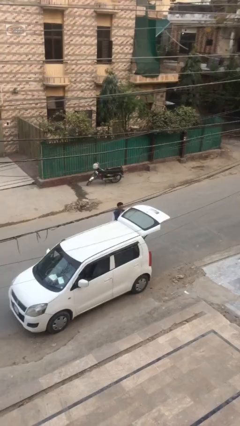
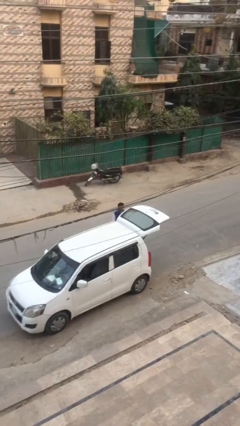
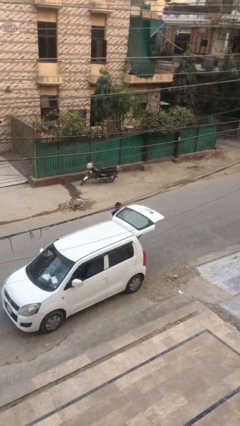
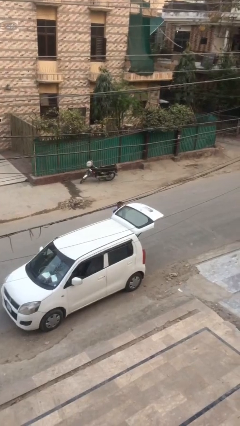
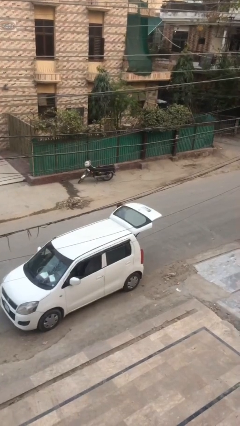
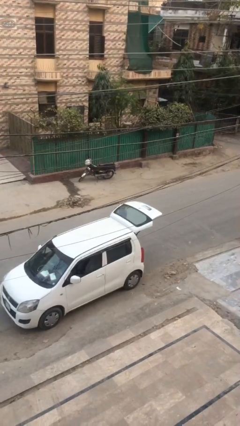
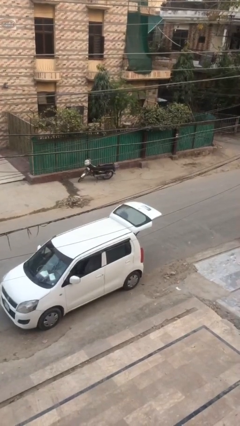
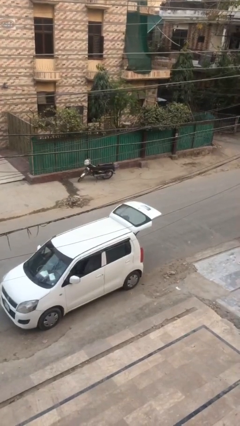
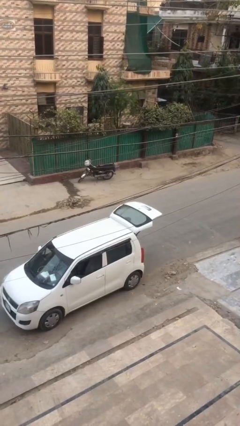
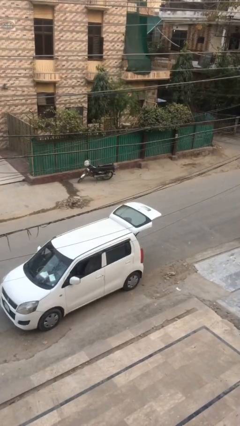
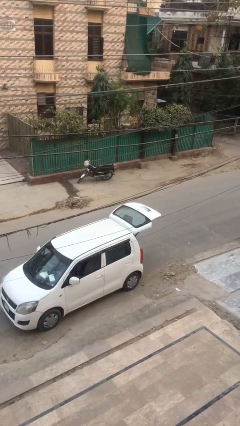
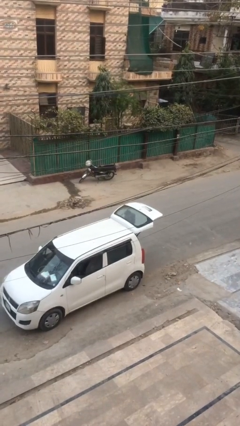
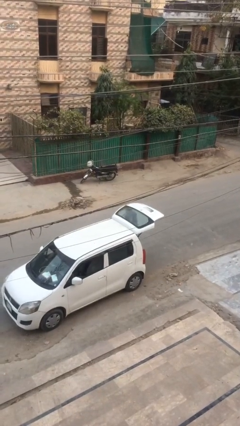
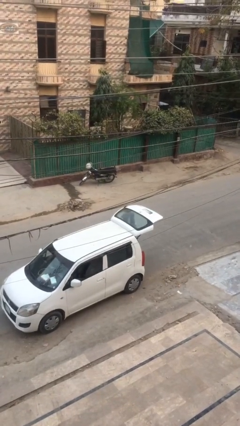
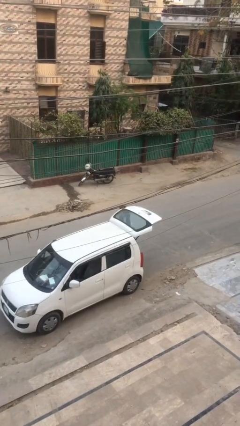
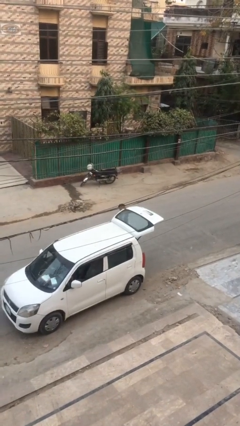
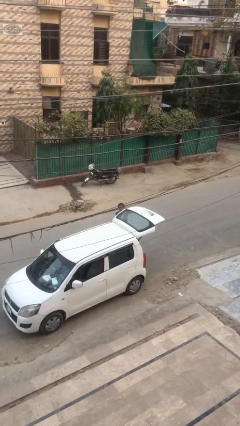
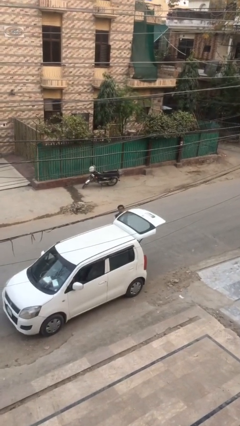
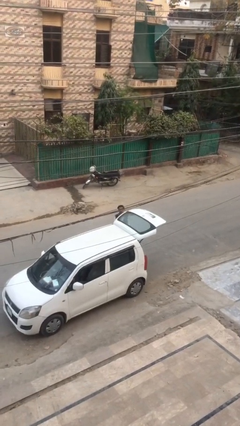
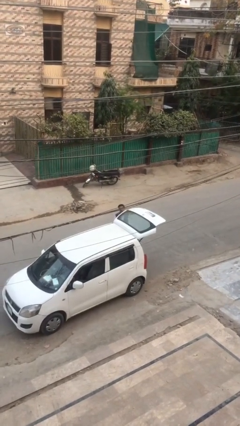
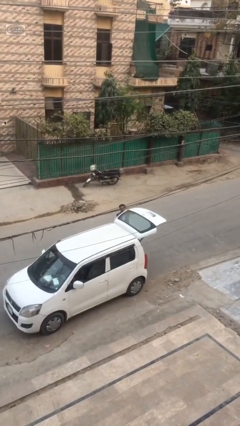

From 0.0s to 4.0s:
person loads car

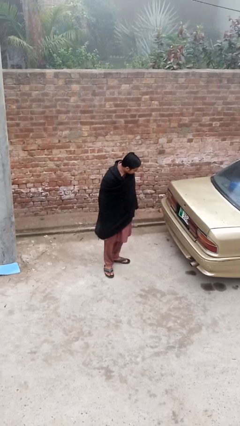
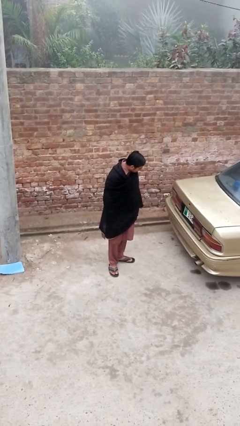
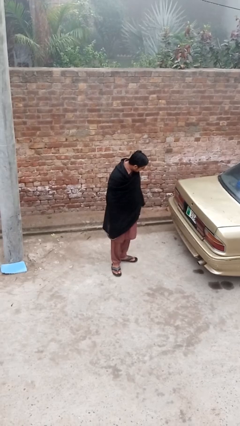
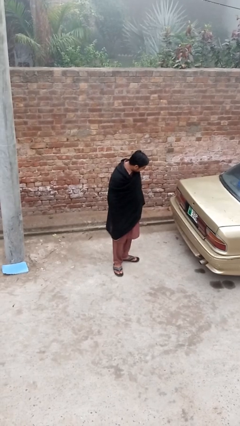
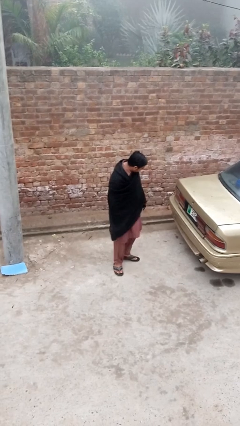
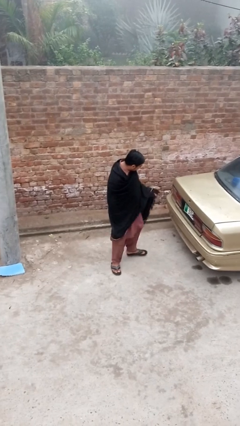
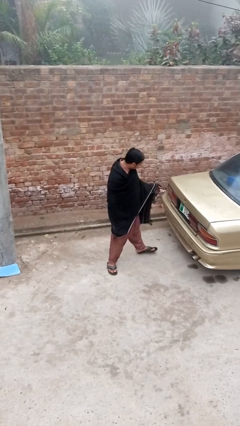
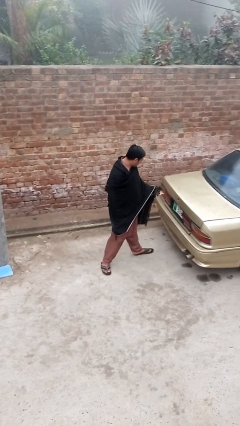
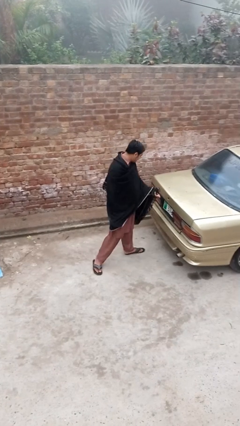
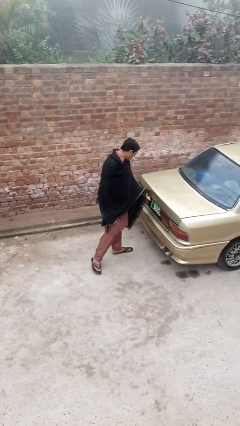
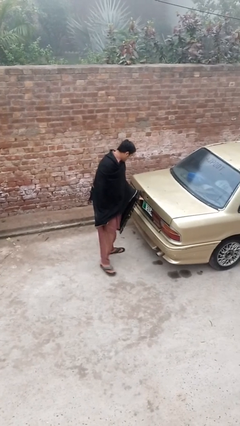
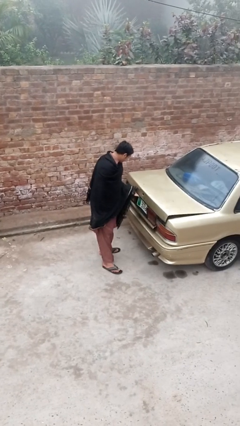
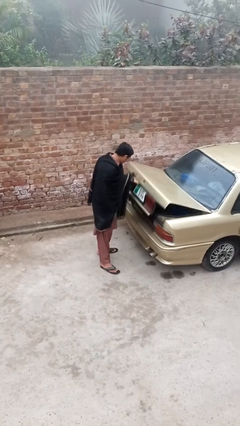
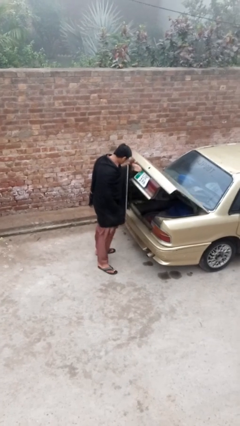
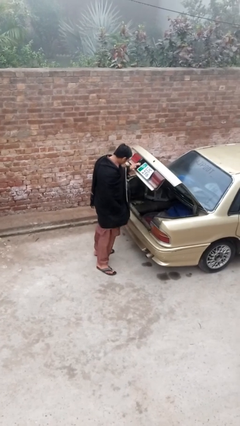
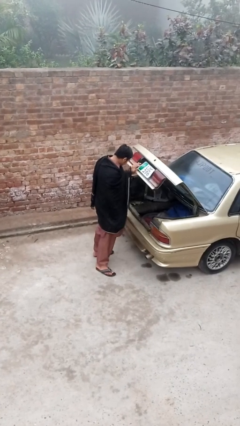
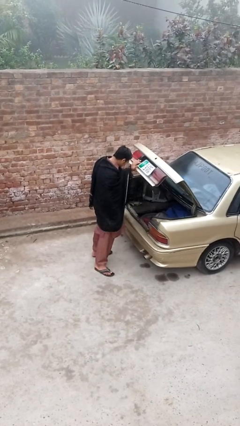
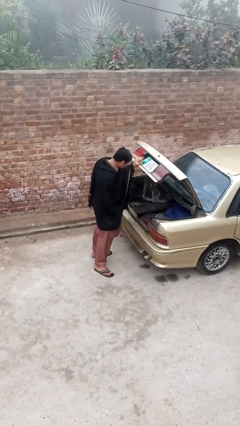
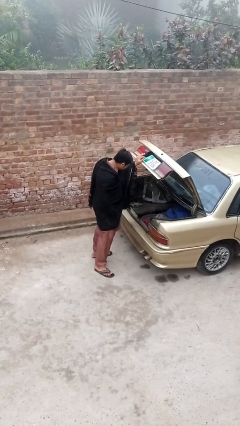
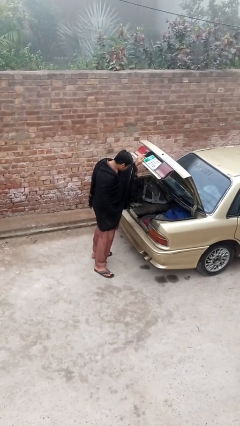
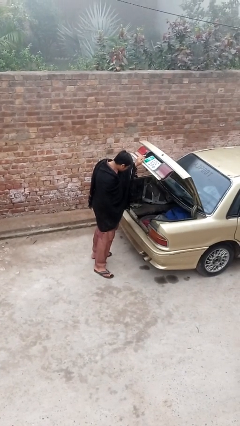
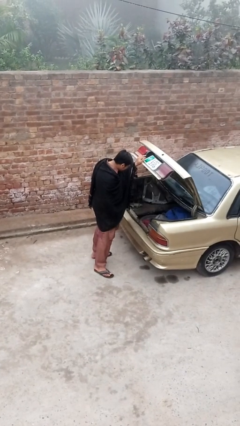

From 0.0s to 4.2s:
person opens car trunk

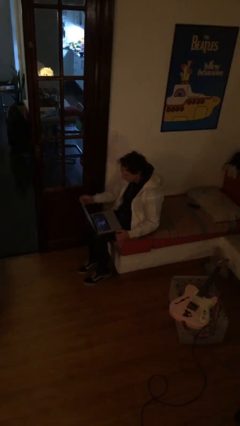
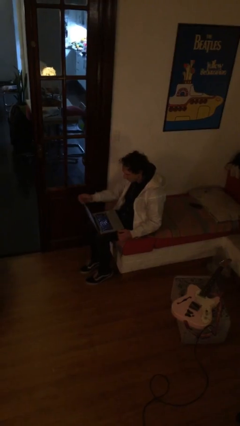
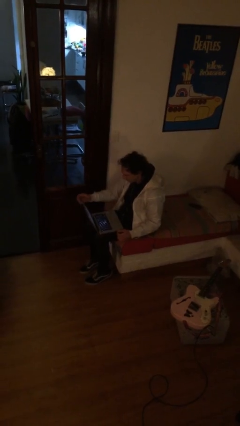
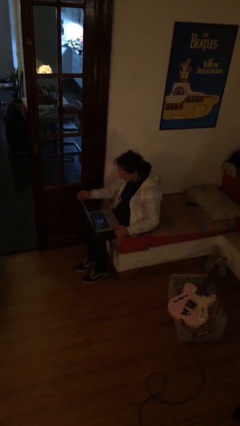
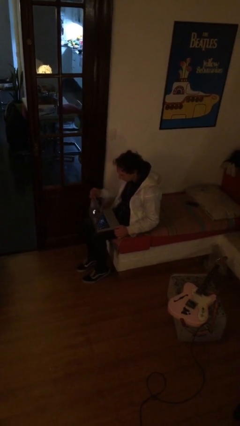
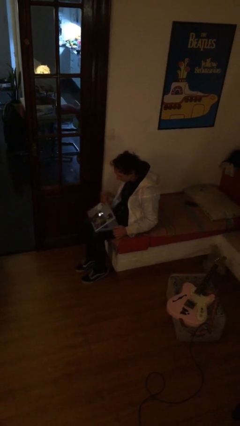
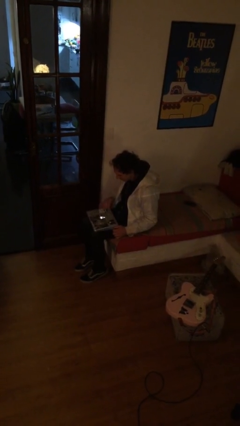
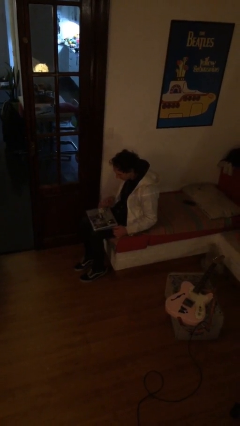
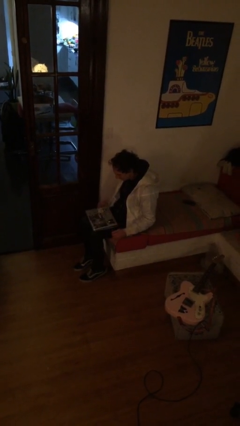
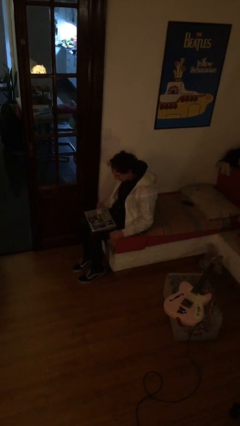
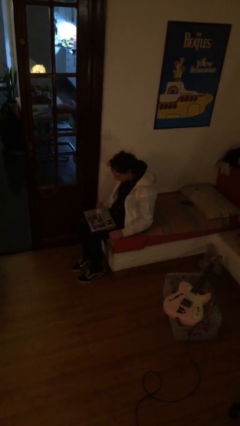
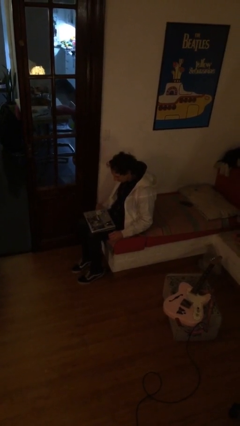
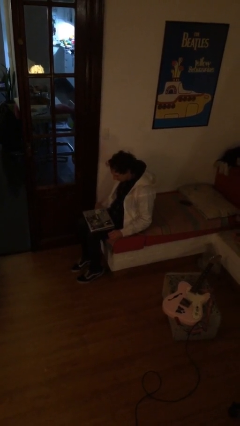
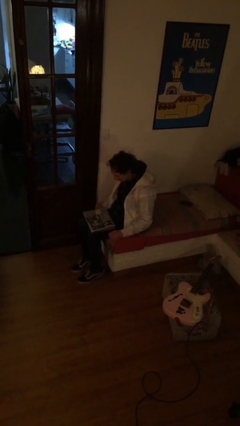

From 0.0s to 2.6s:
person closes laptop

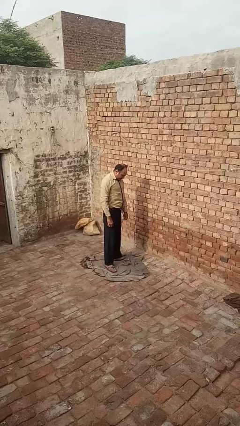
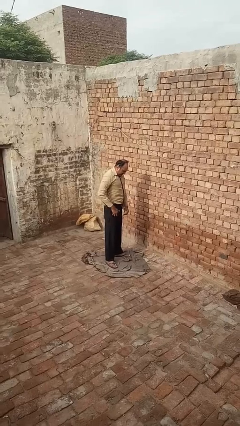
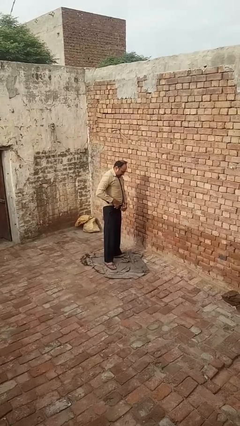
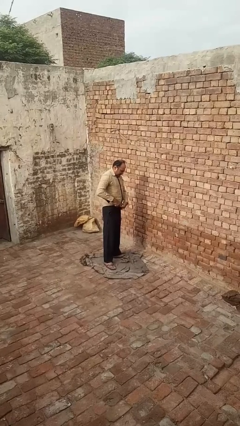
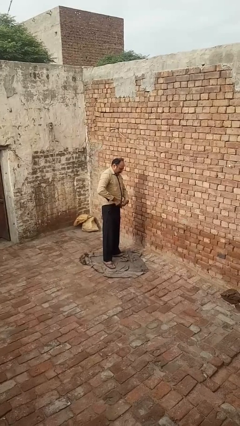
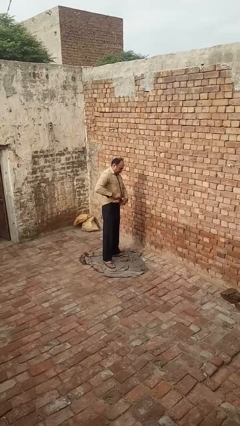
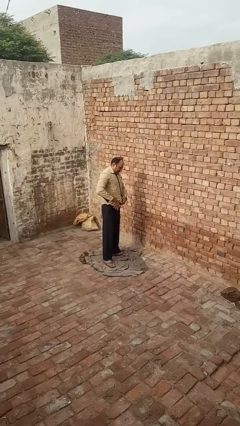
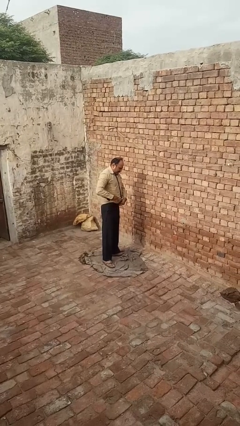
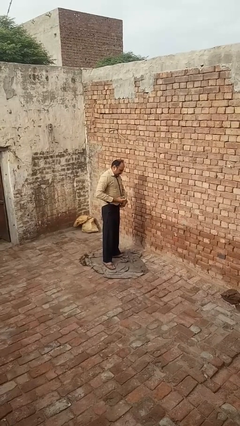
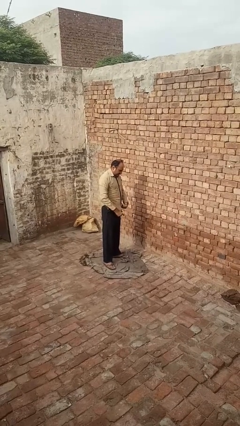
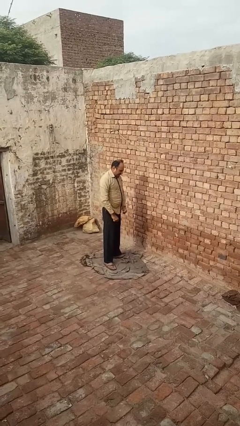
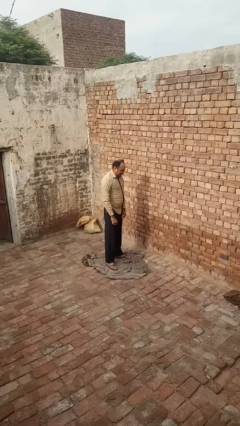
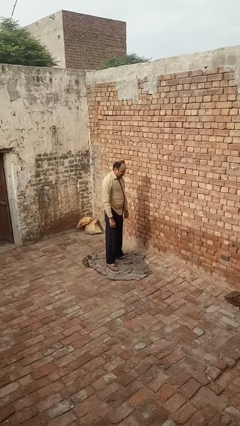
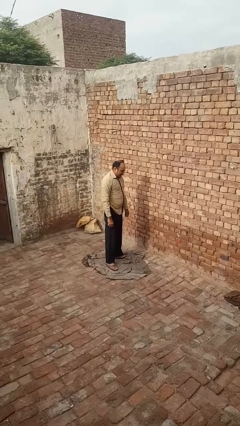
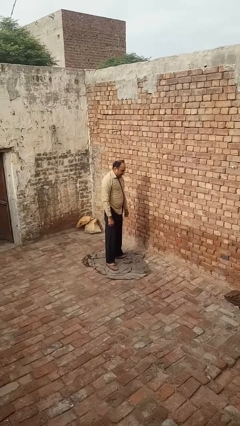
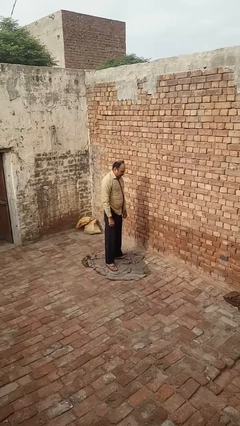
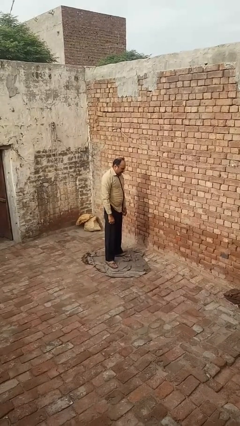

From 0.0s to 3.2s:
person untucks shirt

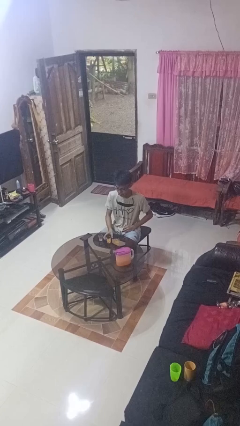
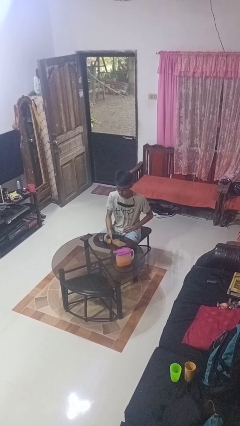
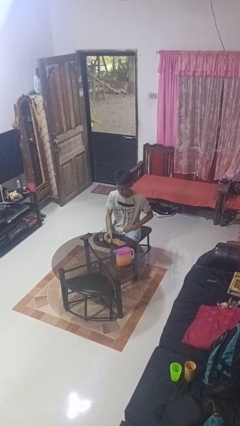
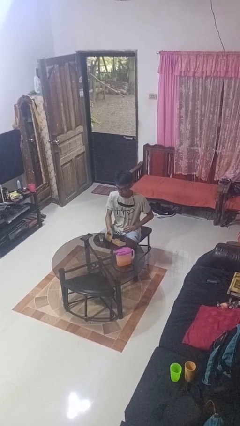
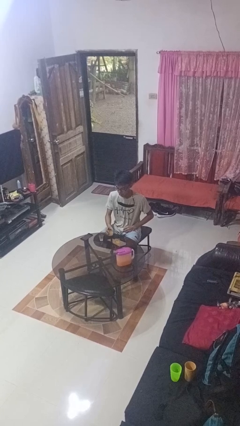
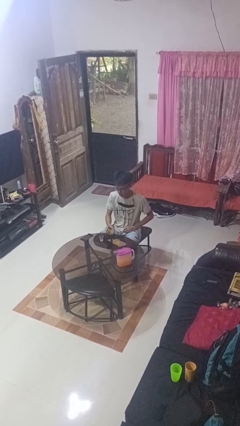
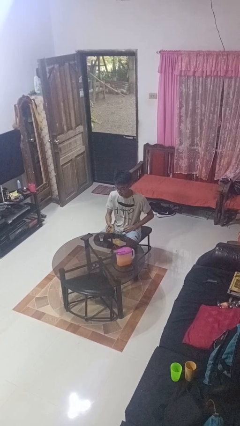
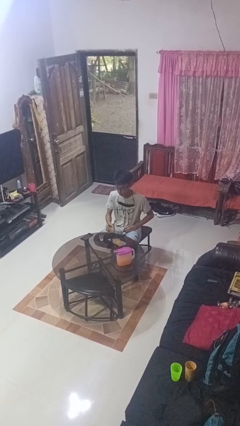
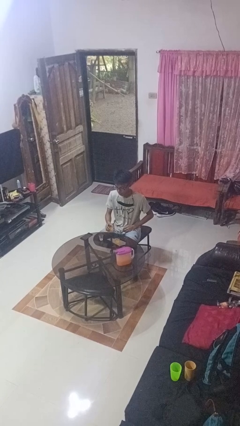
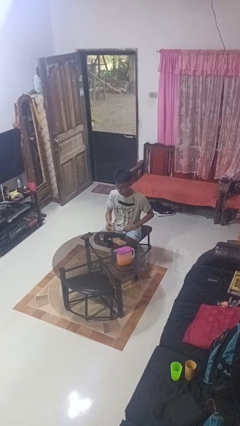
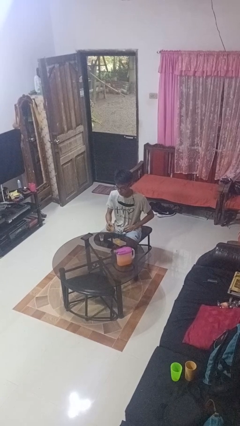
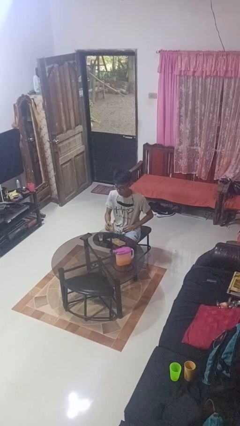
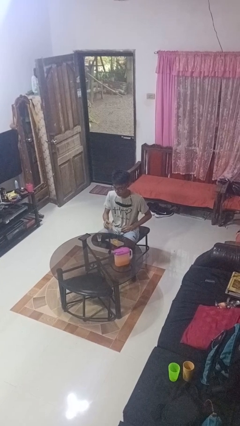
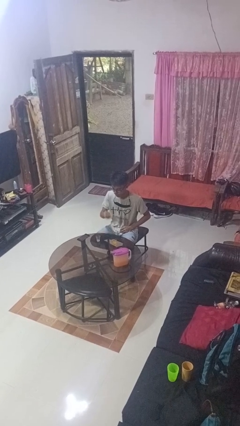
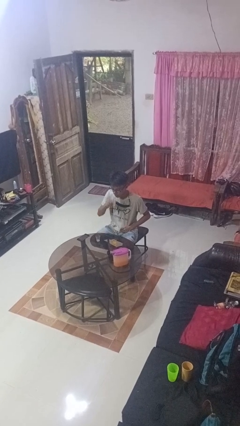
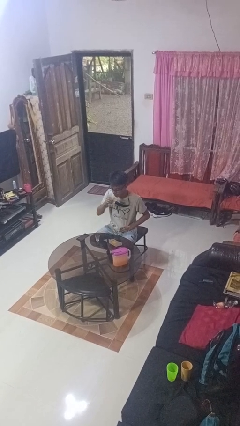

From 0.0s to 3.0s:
person picks up object from table

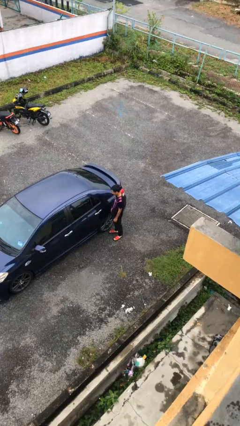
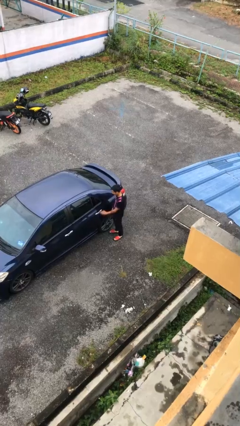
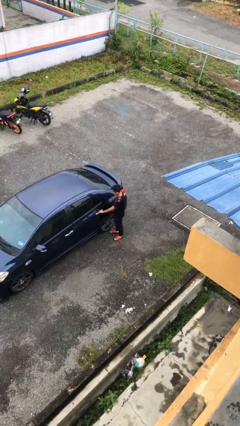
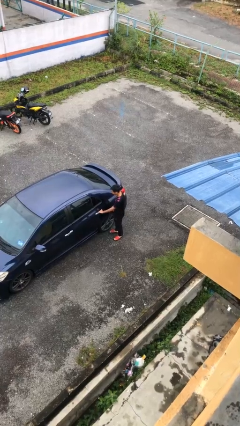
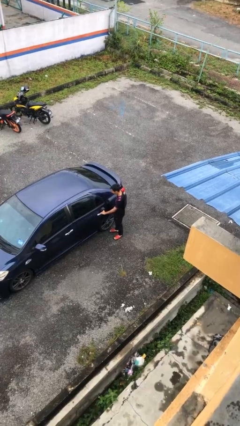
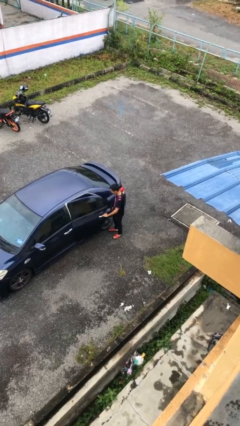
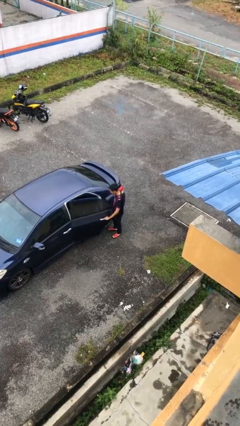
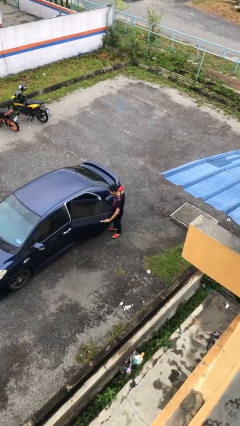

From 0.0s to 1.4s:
person opens car door
